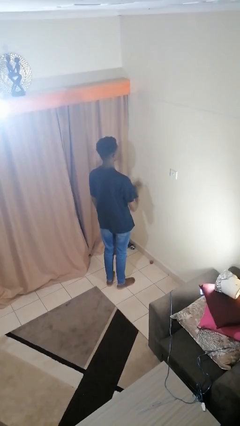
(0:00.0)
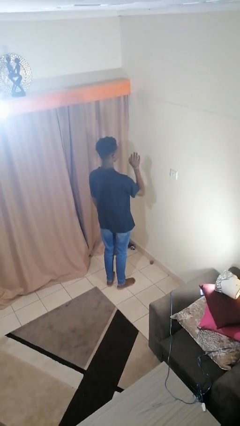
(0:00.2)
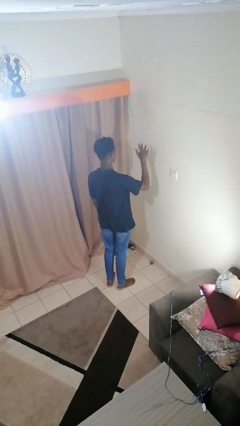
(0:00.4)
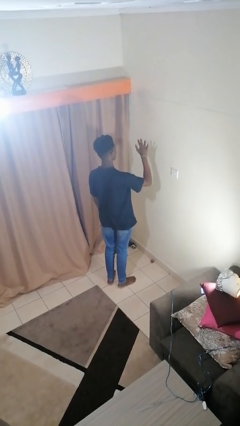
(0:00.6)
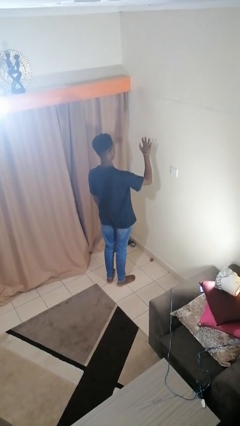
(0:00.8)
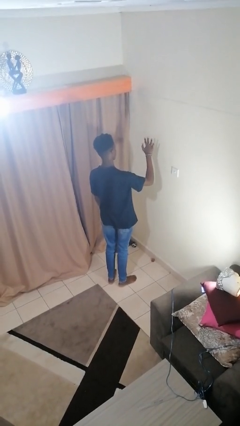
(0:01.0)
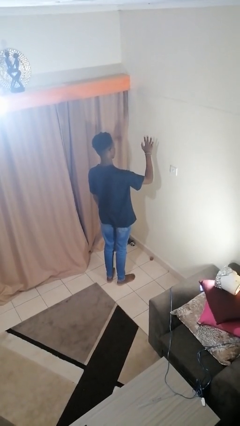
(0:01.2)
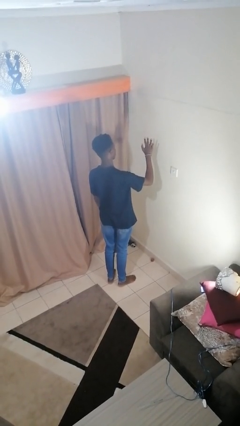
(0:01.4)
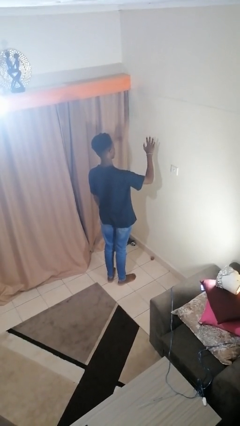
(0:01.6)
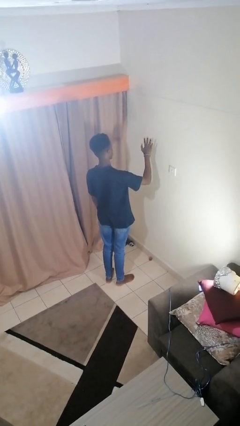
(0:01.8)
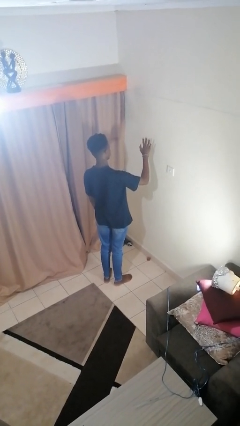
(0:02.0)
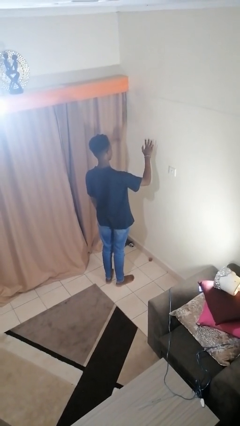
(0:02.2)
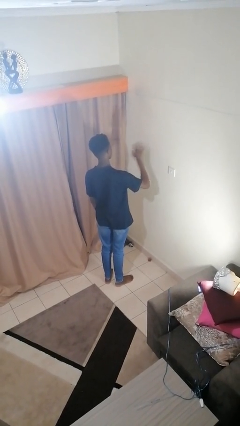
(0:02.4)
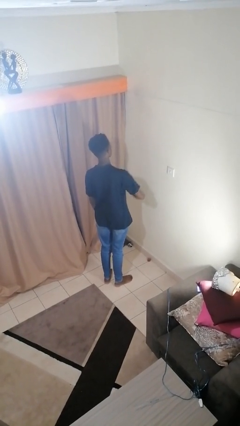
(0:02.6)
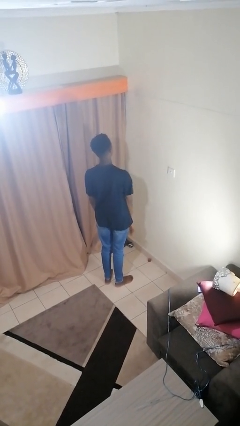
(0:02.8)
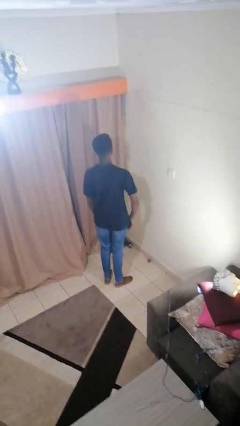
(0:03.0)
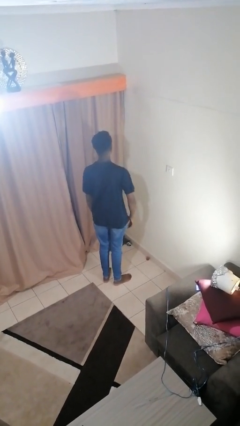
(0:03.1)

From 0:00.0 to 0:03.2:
person gestures number five

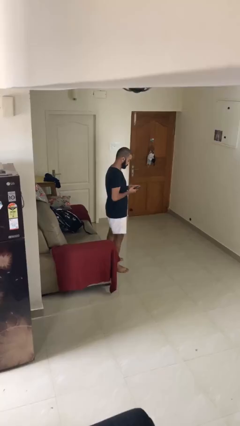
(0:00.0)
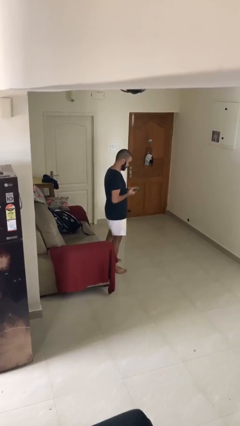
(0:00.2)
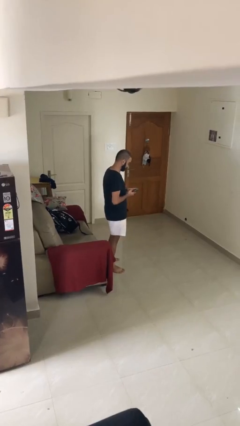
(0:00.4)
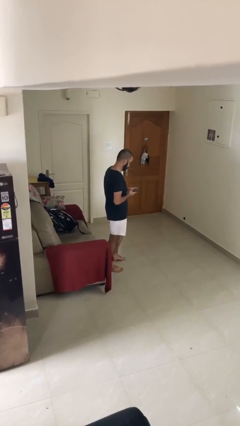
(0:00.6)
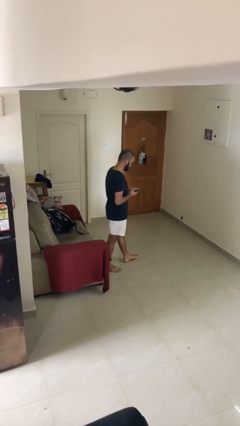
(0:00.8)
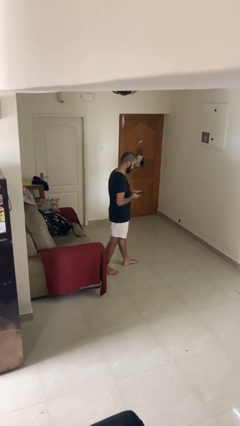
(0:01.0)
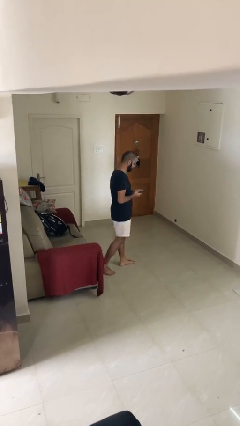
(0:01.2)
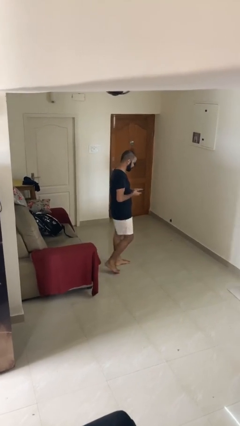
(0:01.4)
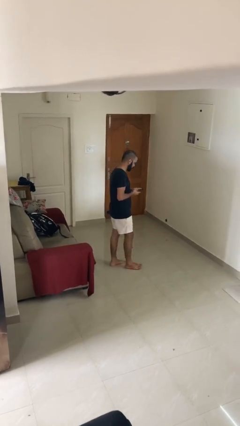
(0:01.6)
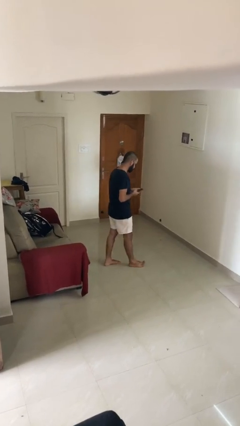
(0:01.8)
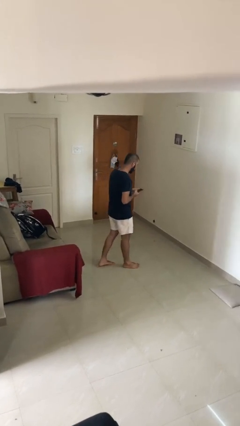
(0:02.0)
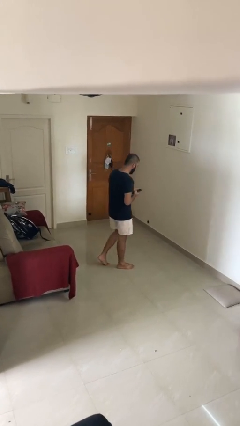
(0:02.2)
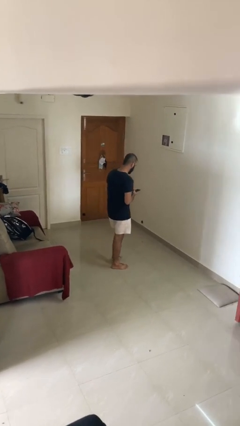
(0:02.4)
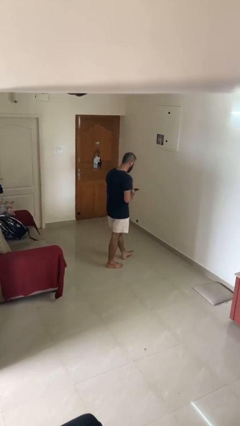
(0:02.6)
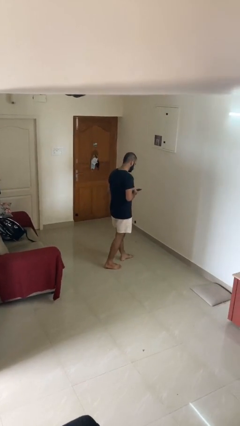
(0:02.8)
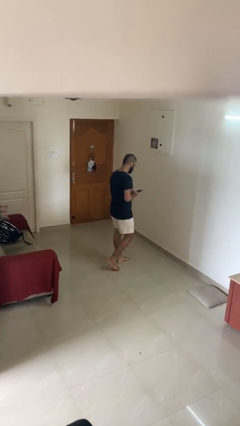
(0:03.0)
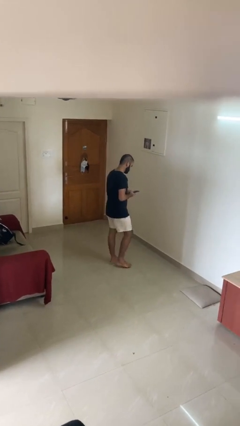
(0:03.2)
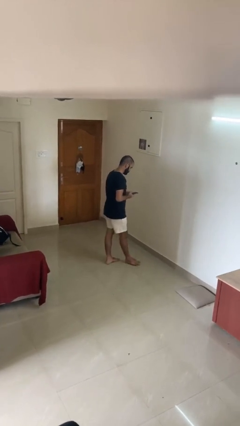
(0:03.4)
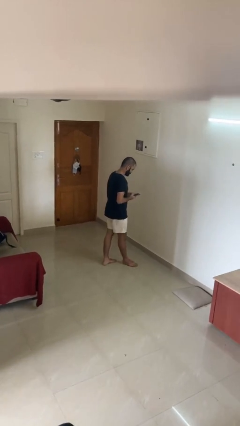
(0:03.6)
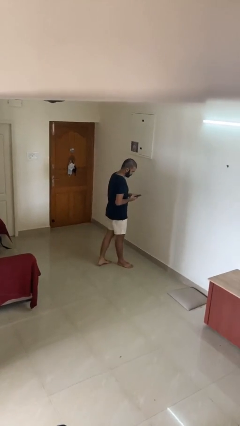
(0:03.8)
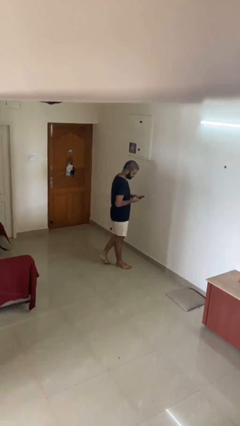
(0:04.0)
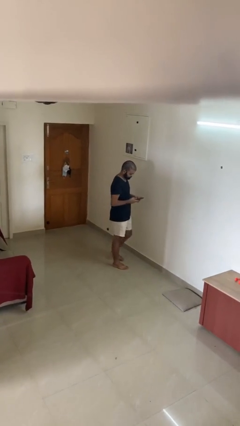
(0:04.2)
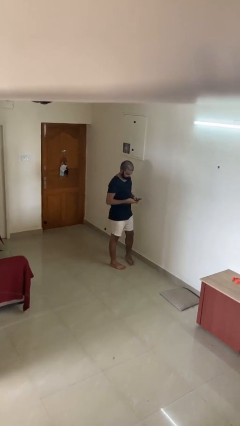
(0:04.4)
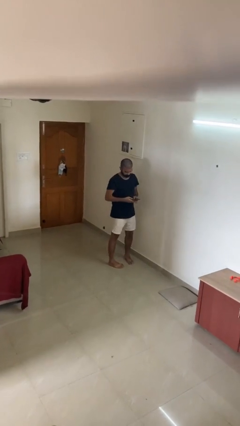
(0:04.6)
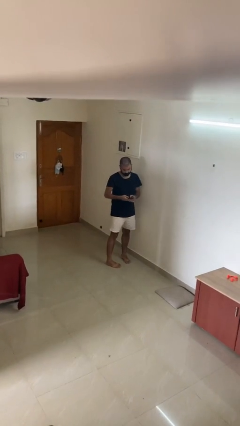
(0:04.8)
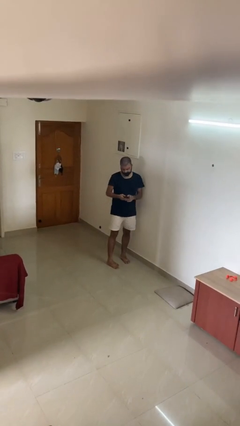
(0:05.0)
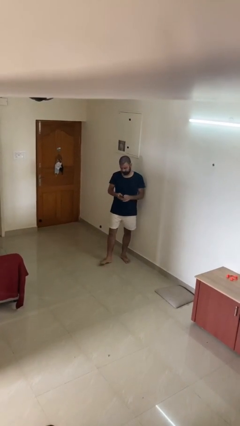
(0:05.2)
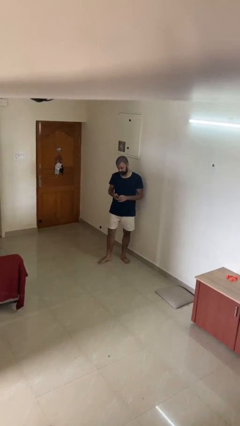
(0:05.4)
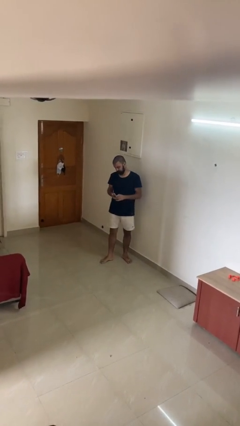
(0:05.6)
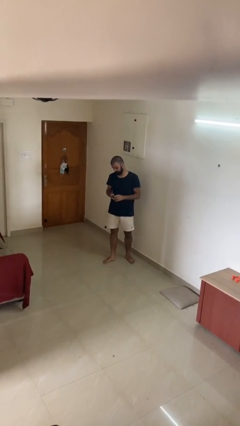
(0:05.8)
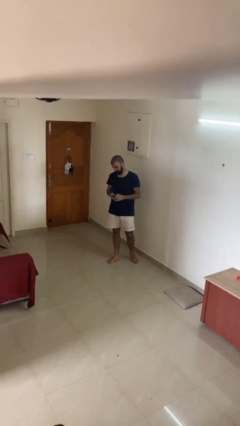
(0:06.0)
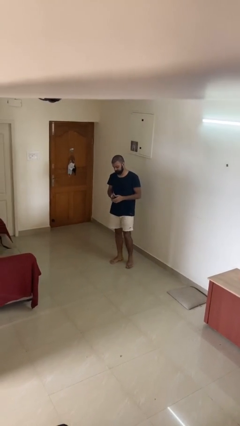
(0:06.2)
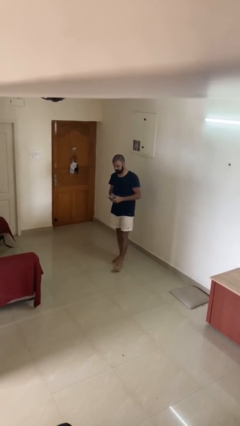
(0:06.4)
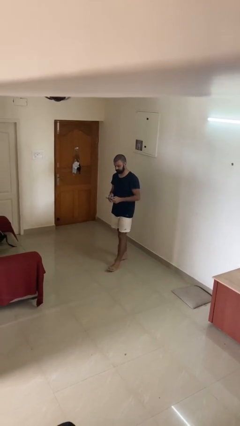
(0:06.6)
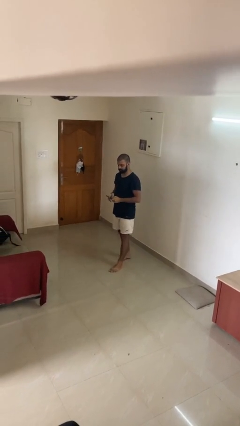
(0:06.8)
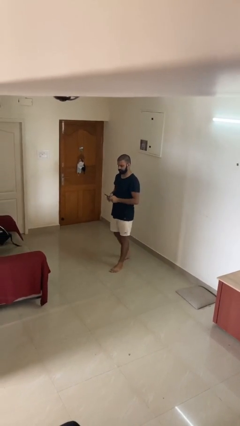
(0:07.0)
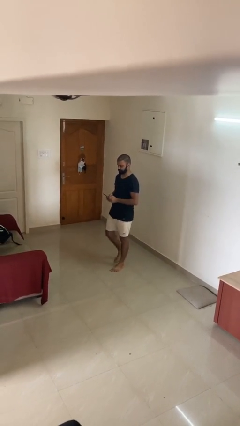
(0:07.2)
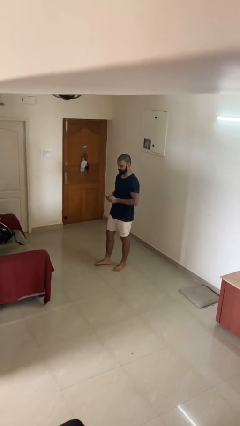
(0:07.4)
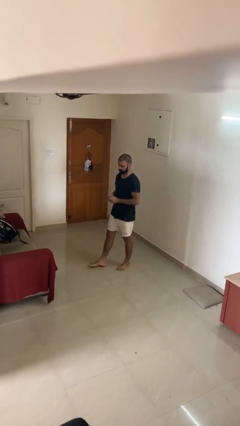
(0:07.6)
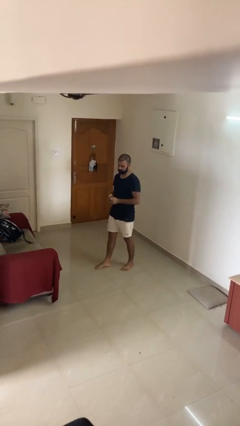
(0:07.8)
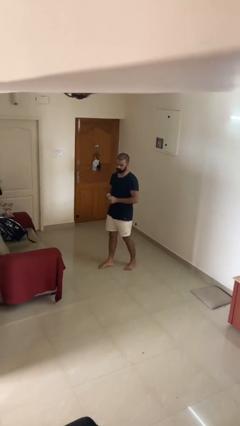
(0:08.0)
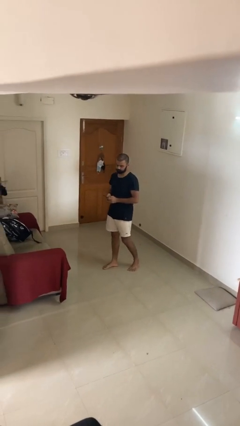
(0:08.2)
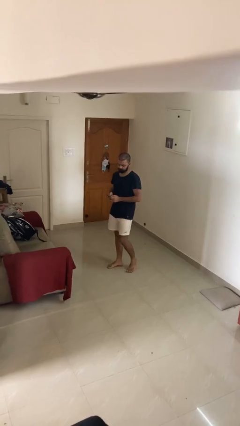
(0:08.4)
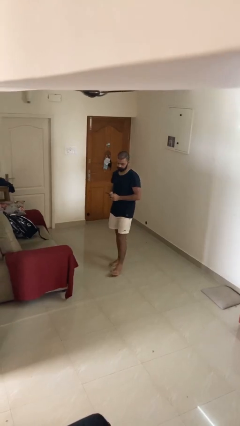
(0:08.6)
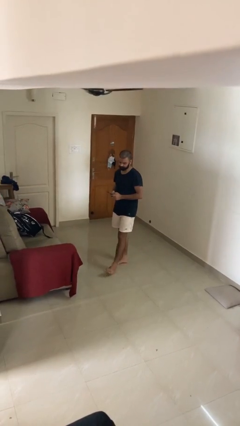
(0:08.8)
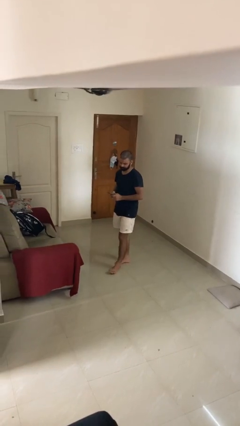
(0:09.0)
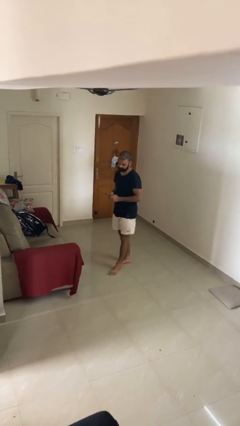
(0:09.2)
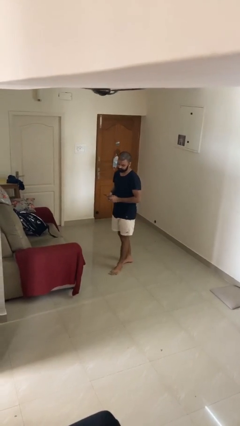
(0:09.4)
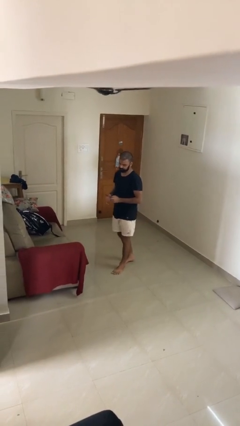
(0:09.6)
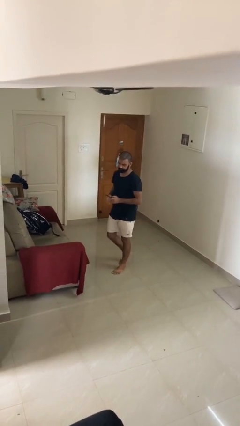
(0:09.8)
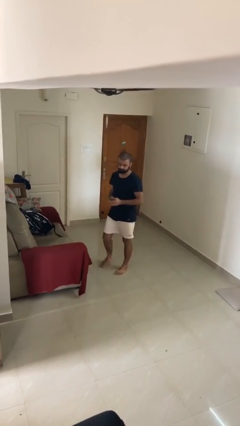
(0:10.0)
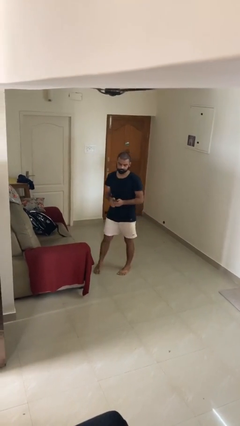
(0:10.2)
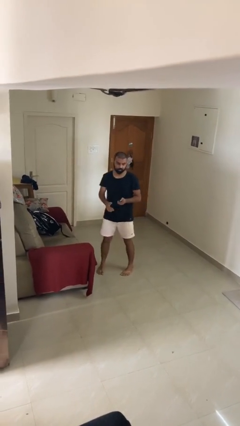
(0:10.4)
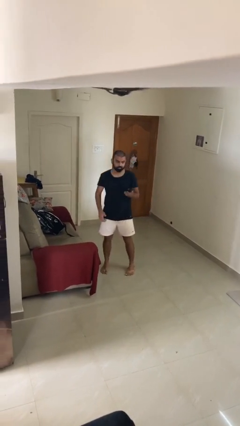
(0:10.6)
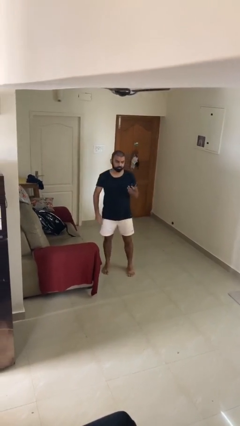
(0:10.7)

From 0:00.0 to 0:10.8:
person texts on phone

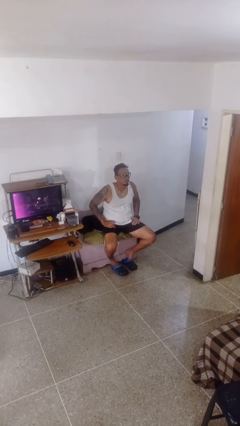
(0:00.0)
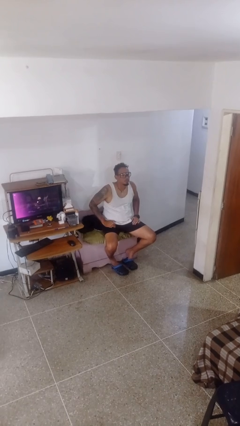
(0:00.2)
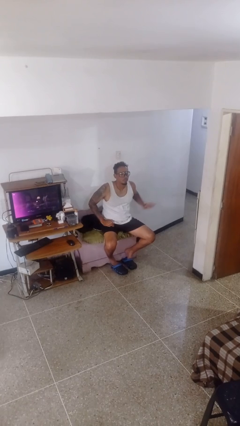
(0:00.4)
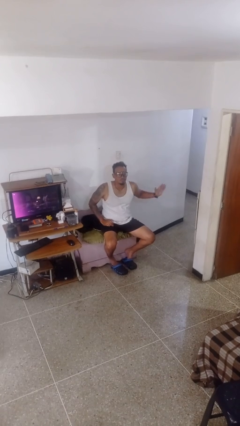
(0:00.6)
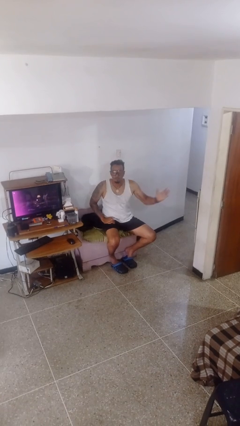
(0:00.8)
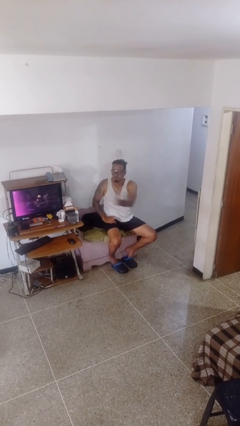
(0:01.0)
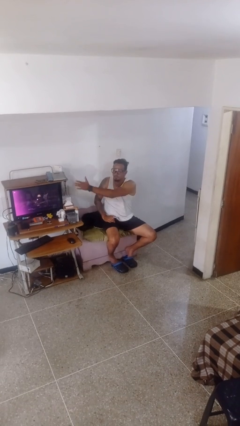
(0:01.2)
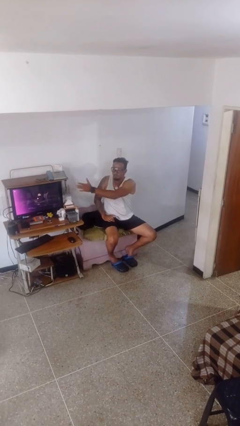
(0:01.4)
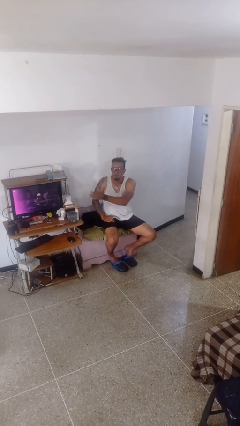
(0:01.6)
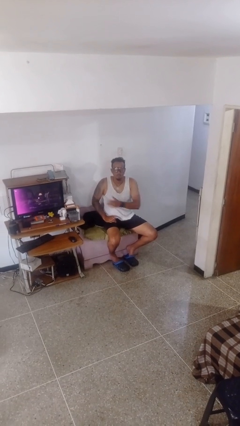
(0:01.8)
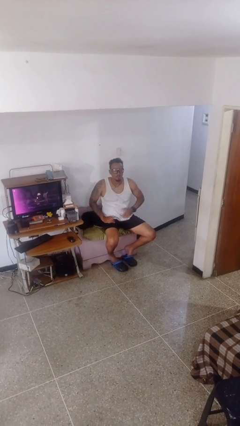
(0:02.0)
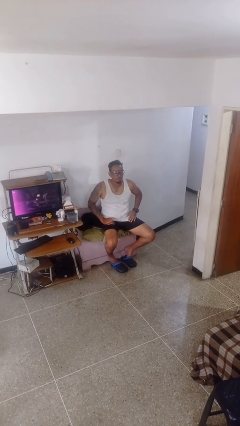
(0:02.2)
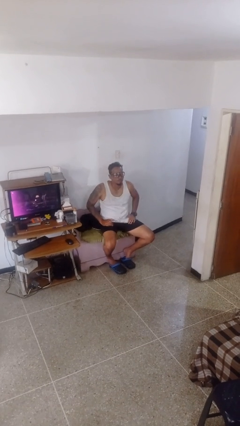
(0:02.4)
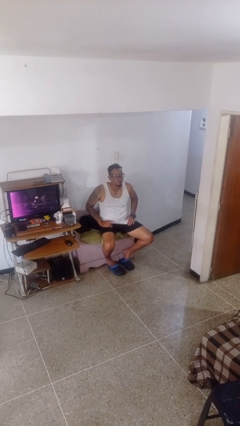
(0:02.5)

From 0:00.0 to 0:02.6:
person gestures swipe right

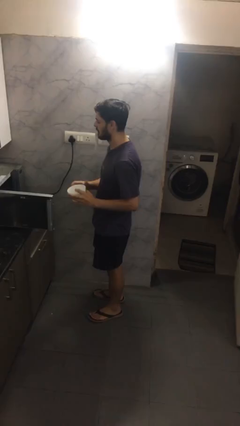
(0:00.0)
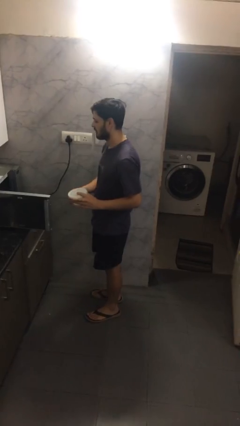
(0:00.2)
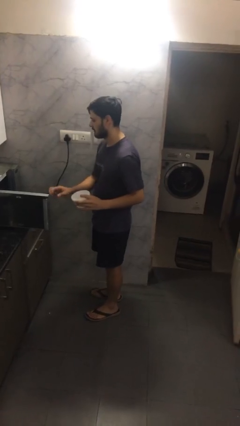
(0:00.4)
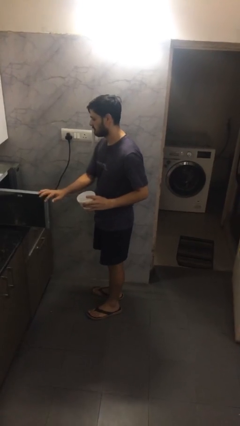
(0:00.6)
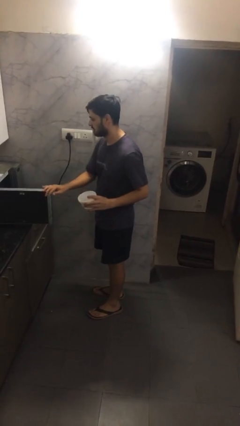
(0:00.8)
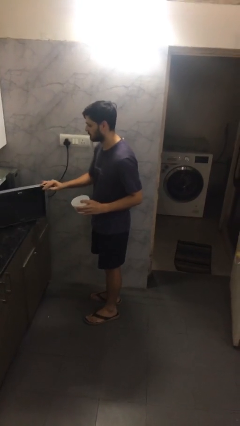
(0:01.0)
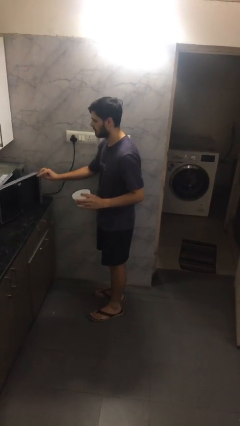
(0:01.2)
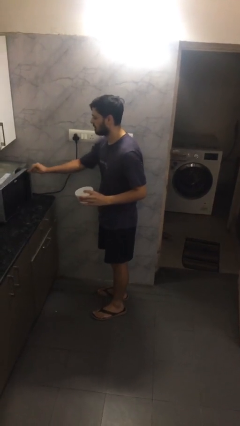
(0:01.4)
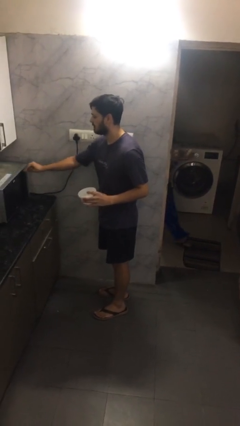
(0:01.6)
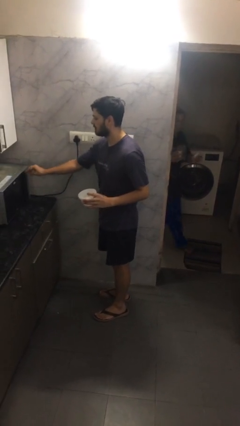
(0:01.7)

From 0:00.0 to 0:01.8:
person closes microwave
